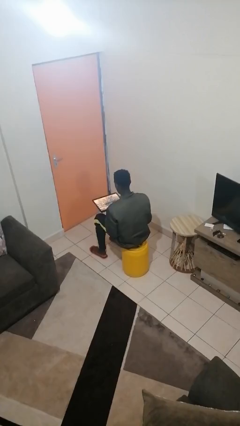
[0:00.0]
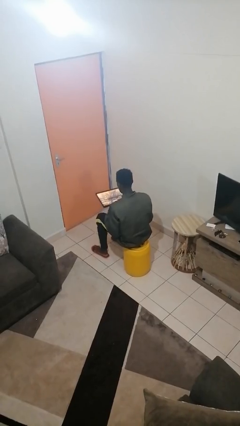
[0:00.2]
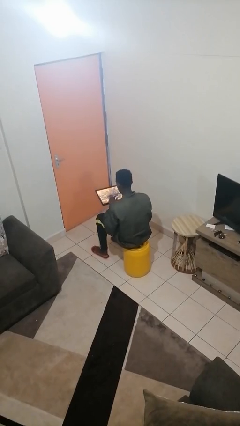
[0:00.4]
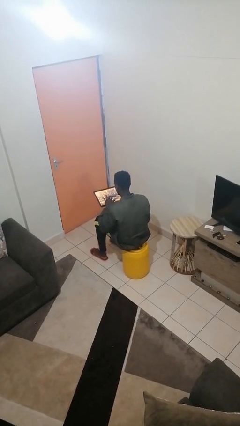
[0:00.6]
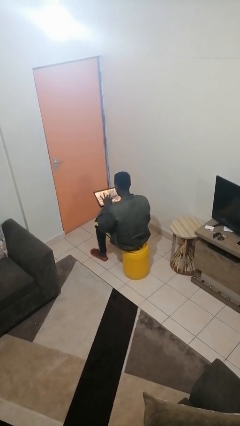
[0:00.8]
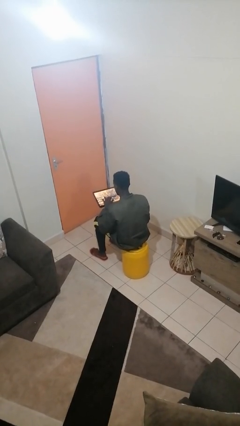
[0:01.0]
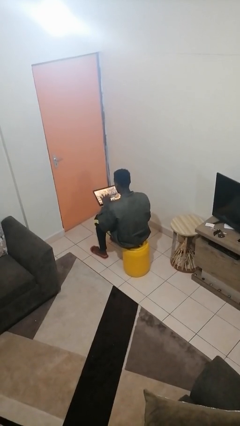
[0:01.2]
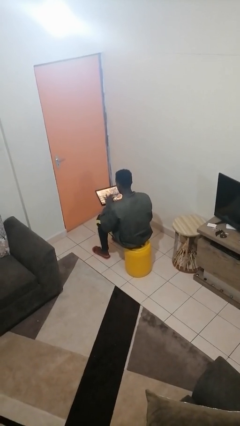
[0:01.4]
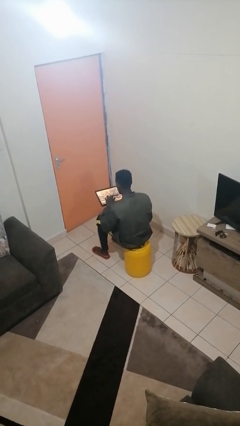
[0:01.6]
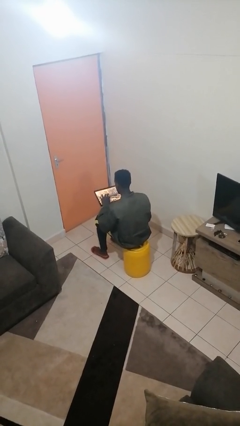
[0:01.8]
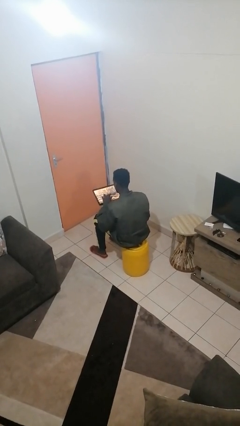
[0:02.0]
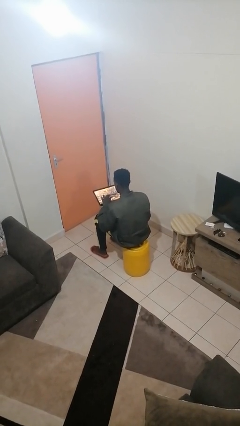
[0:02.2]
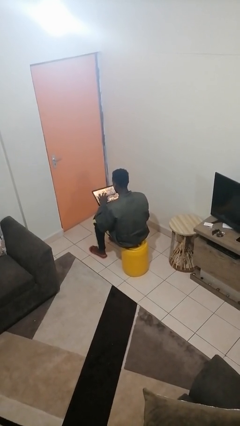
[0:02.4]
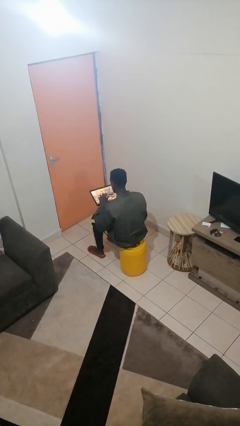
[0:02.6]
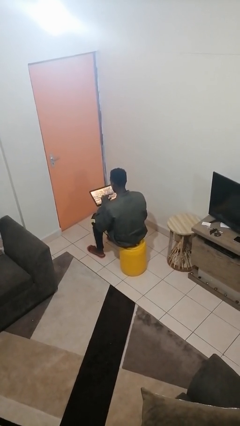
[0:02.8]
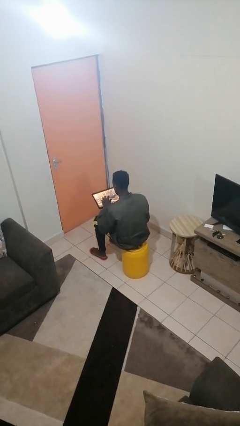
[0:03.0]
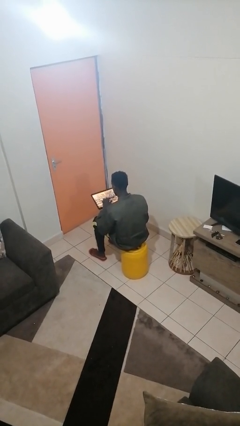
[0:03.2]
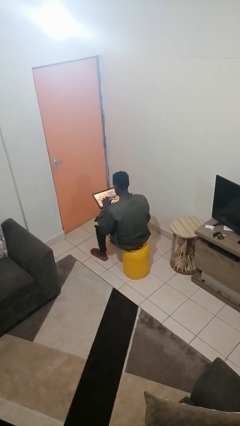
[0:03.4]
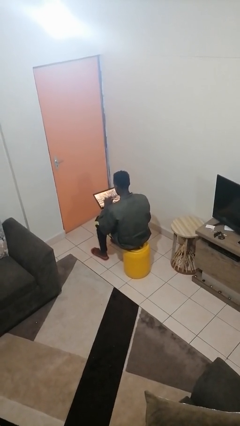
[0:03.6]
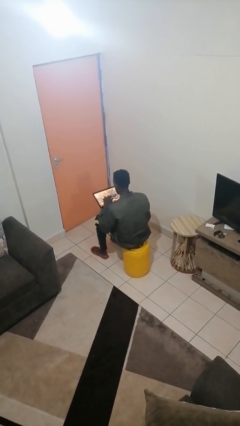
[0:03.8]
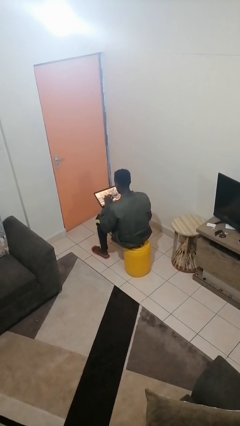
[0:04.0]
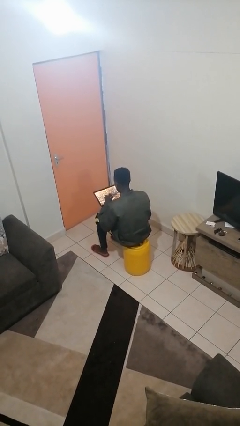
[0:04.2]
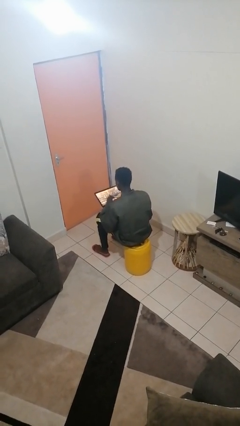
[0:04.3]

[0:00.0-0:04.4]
person interacts with tablet

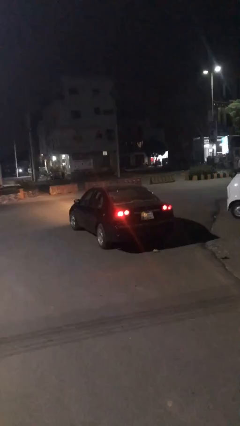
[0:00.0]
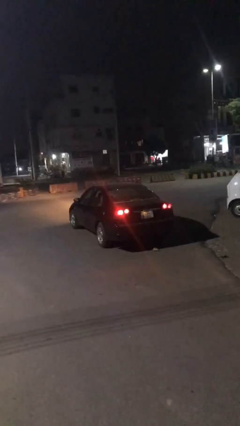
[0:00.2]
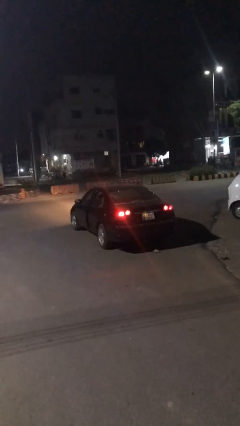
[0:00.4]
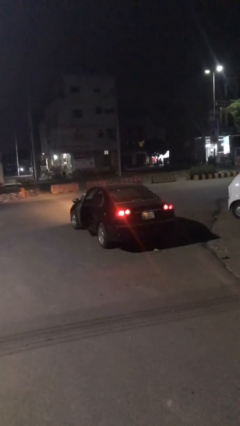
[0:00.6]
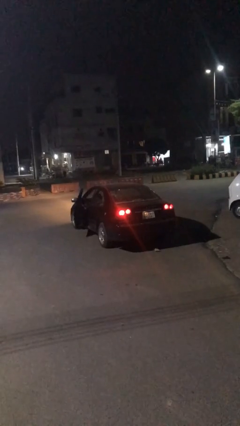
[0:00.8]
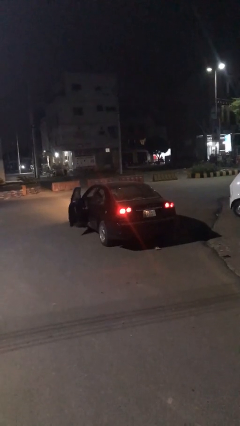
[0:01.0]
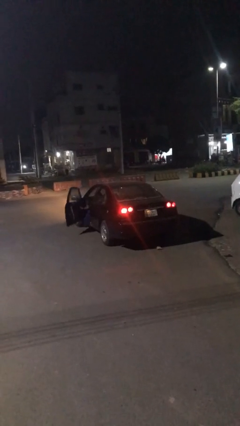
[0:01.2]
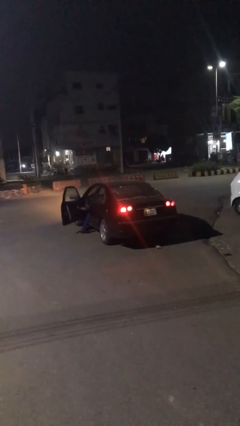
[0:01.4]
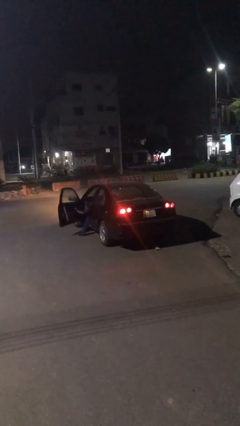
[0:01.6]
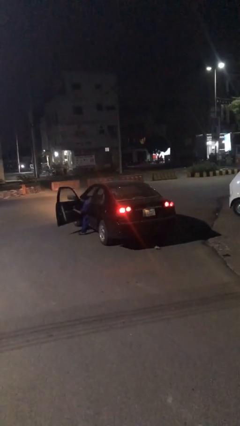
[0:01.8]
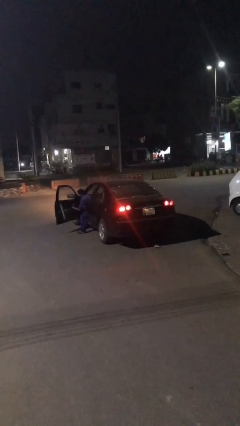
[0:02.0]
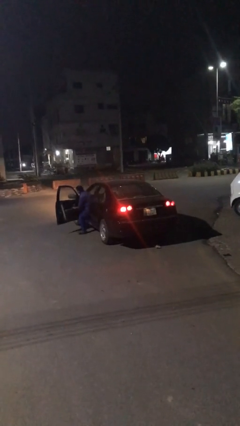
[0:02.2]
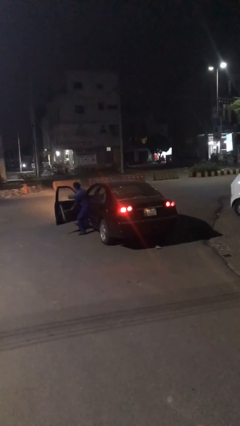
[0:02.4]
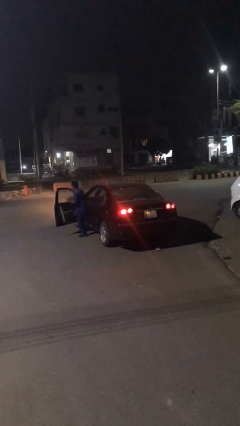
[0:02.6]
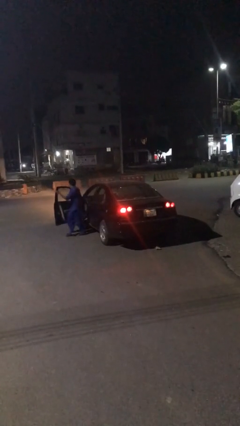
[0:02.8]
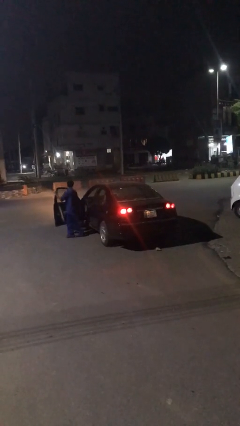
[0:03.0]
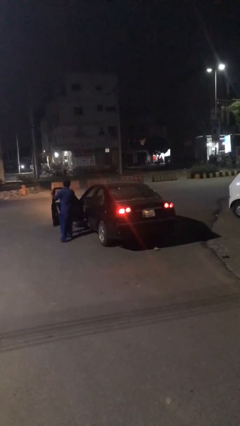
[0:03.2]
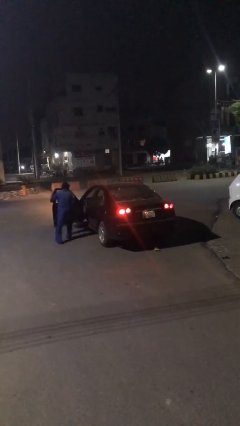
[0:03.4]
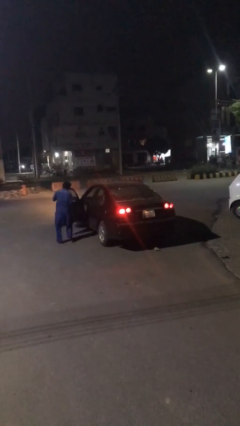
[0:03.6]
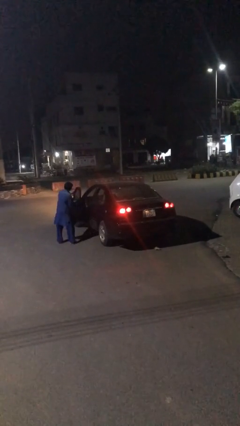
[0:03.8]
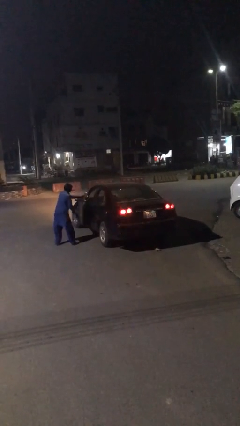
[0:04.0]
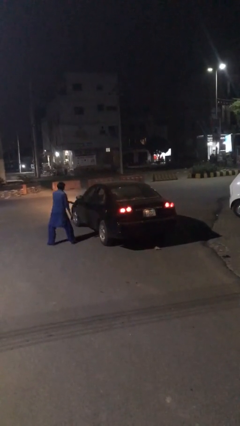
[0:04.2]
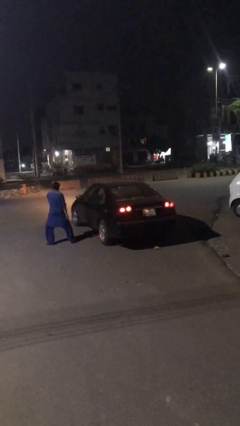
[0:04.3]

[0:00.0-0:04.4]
car drops off person

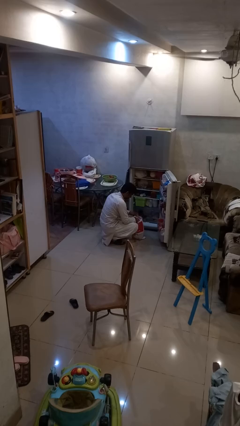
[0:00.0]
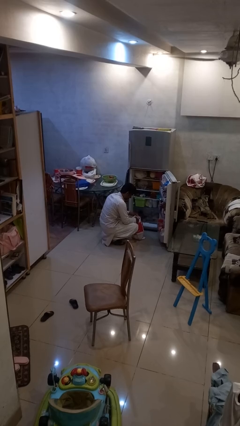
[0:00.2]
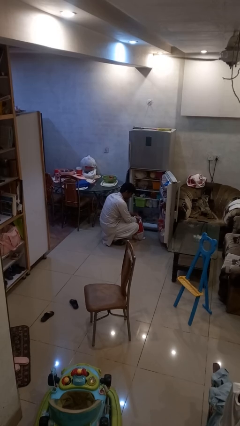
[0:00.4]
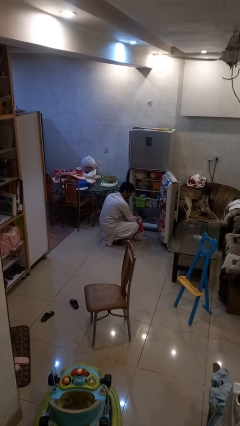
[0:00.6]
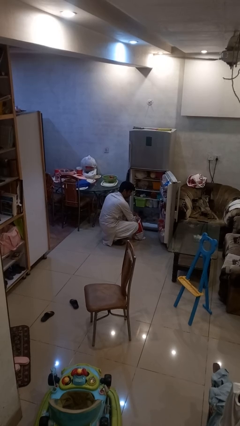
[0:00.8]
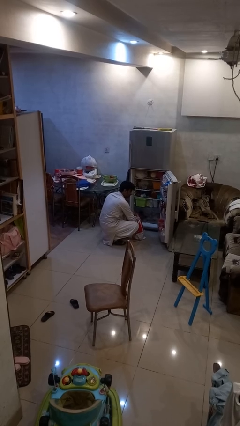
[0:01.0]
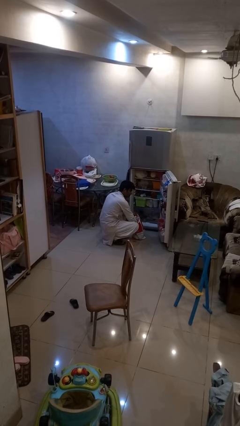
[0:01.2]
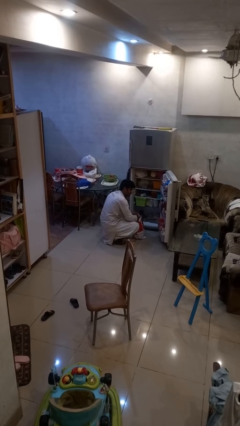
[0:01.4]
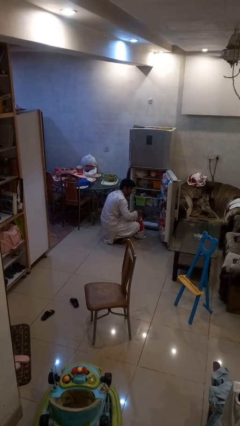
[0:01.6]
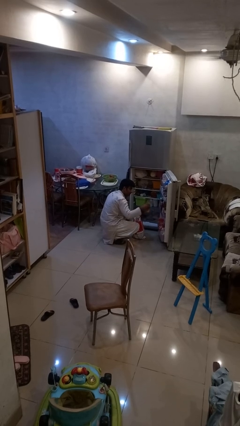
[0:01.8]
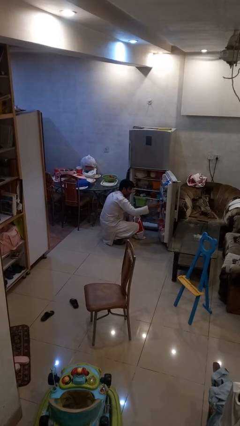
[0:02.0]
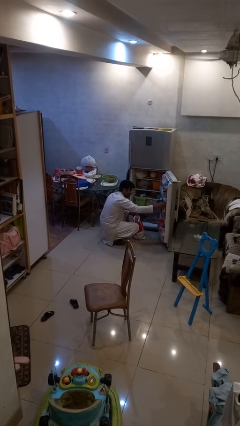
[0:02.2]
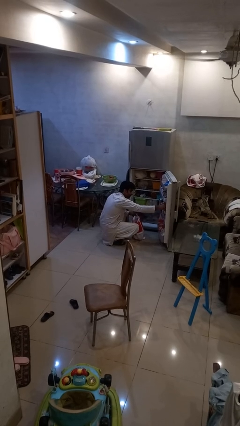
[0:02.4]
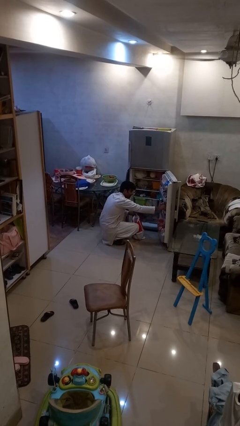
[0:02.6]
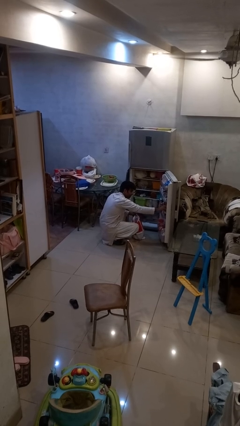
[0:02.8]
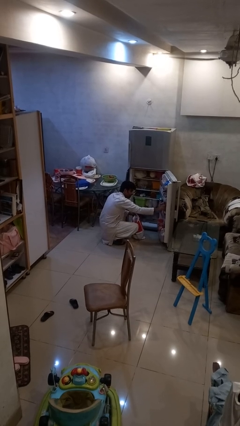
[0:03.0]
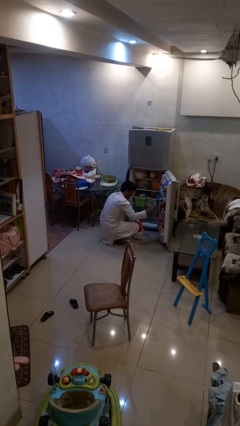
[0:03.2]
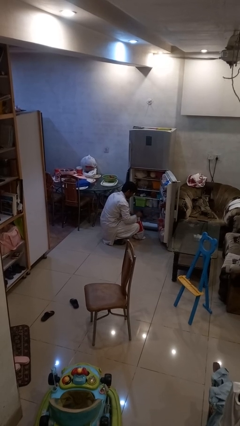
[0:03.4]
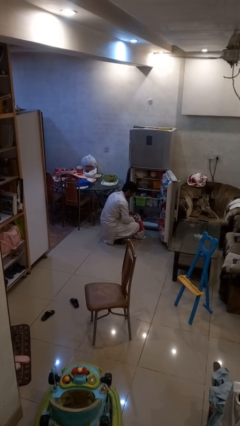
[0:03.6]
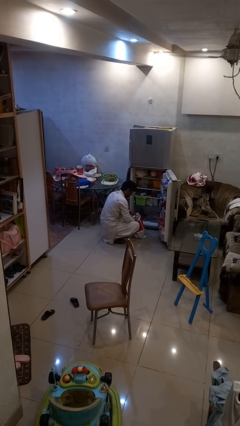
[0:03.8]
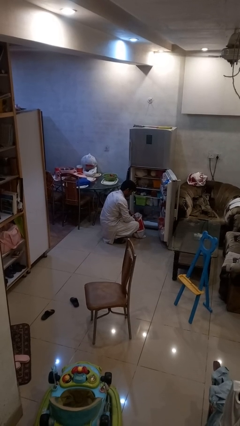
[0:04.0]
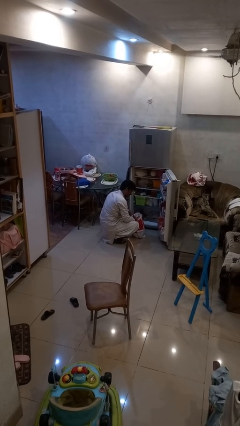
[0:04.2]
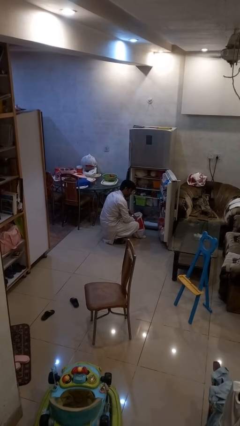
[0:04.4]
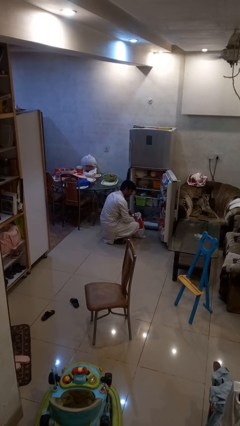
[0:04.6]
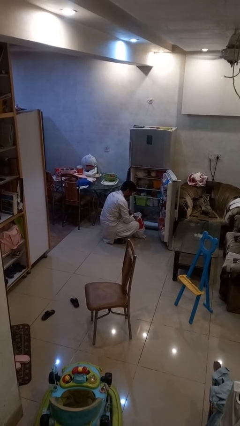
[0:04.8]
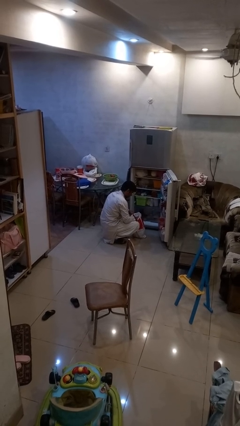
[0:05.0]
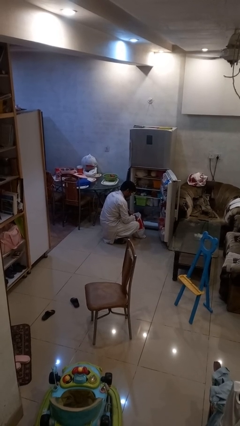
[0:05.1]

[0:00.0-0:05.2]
person loads groceries into refrigerator

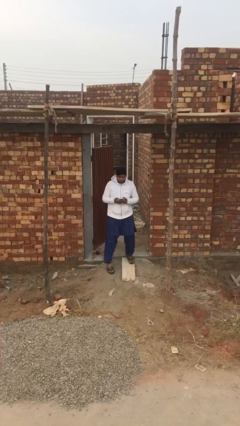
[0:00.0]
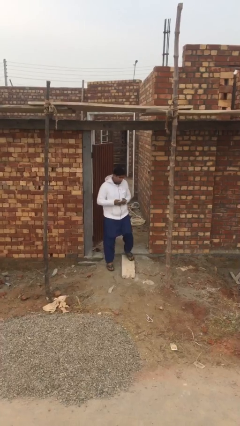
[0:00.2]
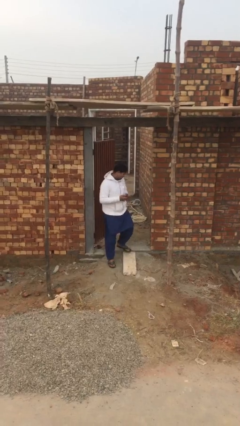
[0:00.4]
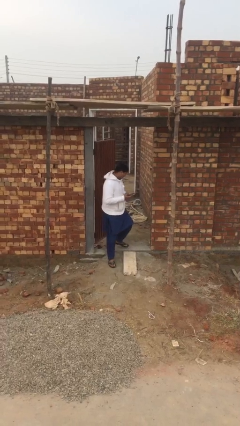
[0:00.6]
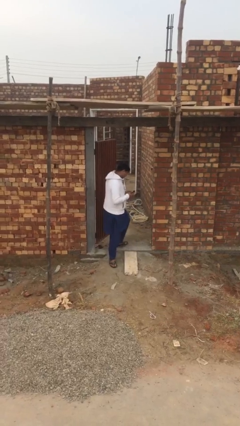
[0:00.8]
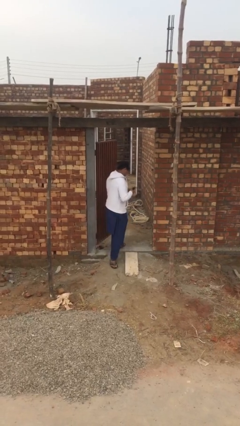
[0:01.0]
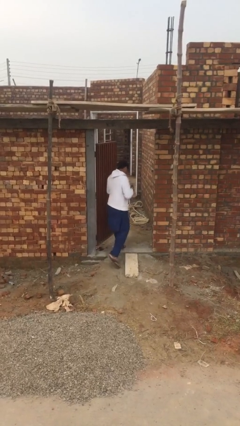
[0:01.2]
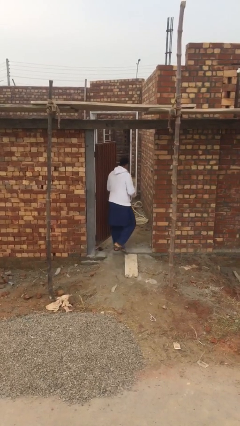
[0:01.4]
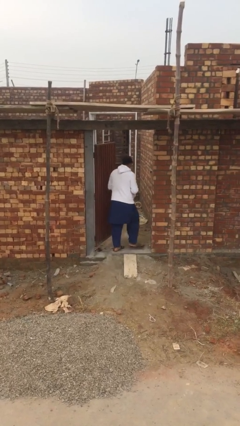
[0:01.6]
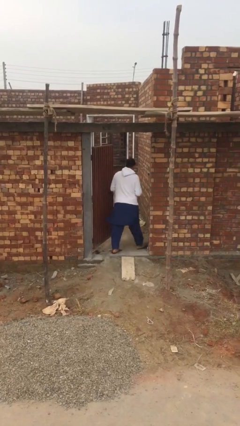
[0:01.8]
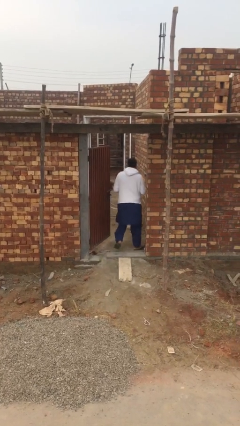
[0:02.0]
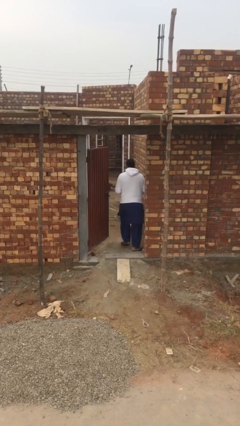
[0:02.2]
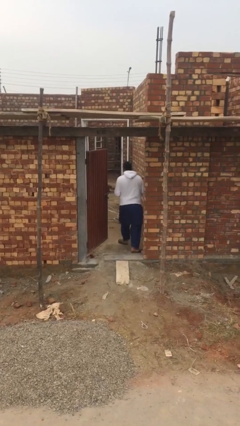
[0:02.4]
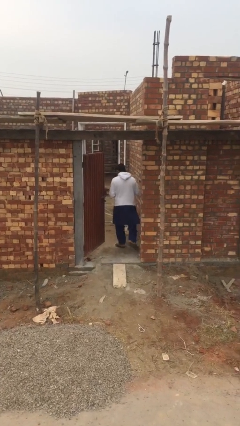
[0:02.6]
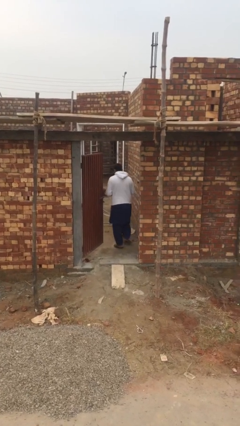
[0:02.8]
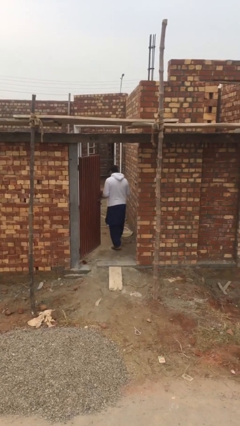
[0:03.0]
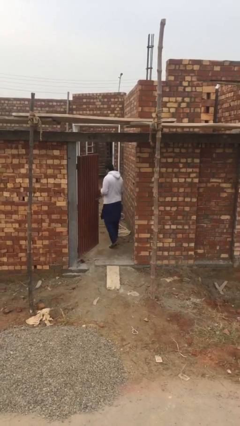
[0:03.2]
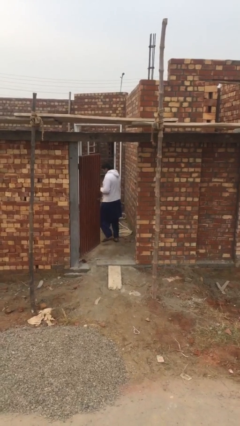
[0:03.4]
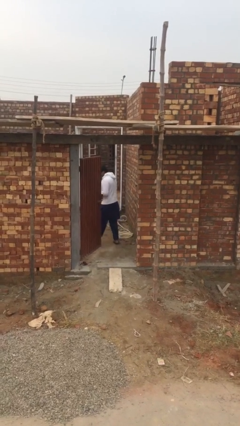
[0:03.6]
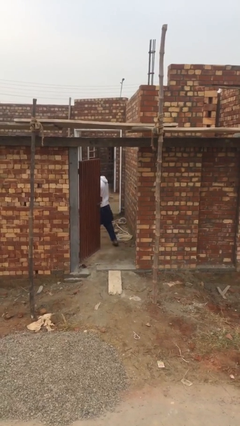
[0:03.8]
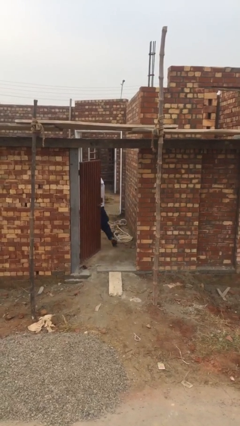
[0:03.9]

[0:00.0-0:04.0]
person exits scene through structure
